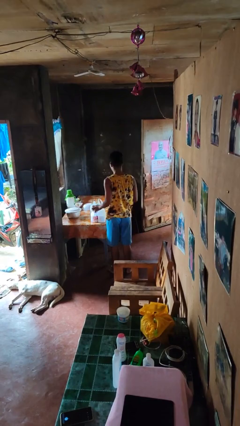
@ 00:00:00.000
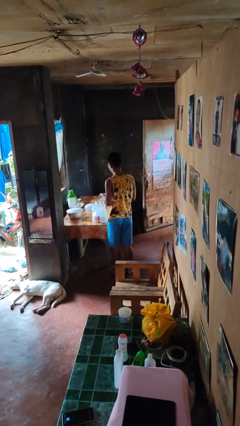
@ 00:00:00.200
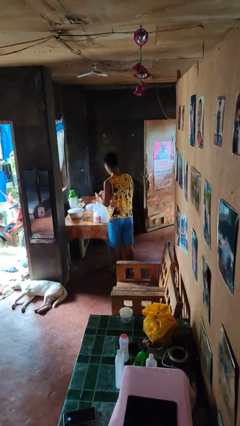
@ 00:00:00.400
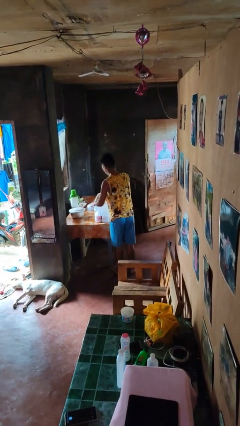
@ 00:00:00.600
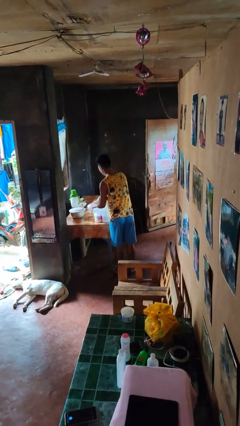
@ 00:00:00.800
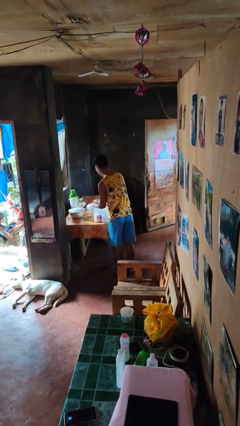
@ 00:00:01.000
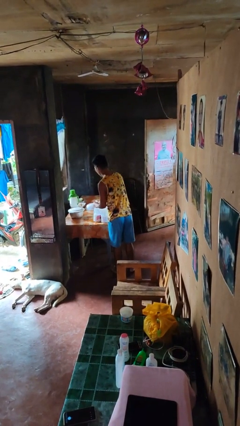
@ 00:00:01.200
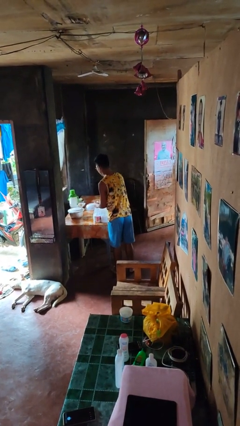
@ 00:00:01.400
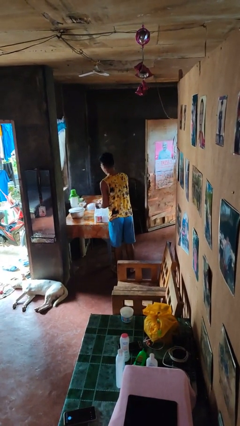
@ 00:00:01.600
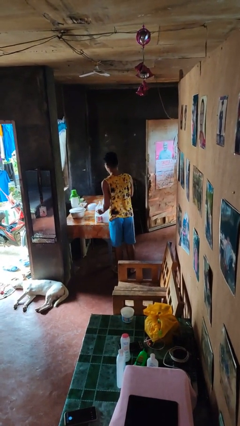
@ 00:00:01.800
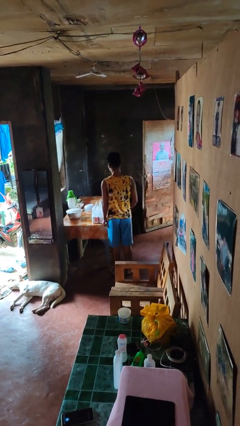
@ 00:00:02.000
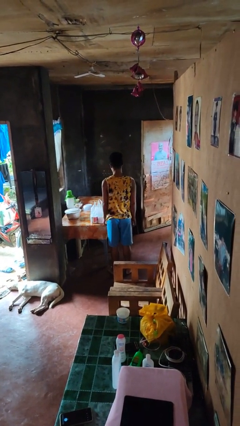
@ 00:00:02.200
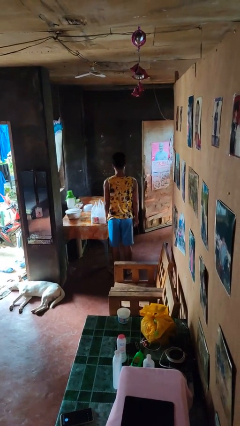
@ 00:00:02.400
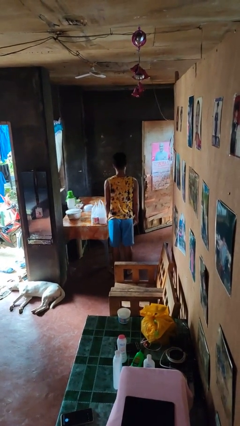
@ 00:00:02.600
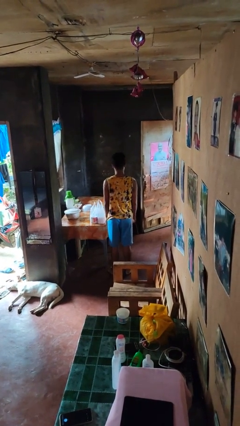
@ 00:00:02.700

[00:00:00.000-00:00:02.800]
person puts object into bag

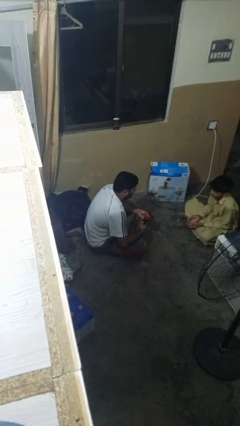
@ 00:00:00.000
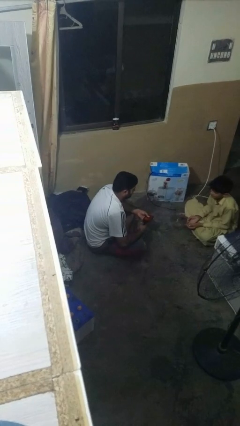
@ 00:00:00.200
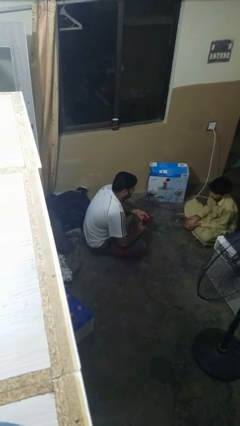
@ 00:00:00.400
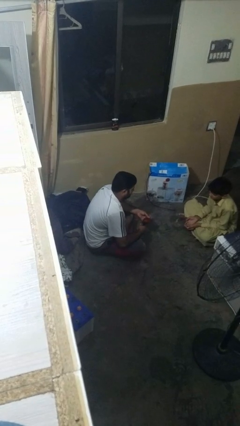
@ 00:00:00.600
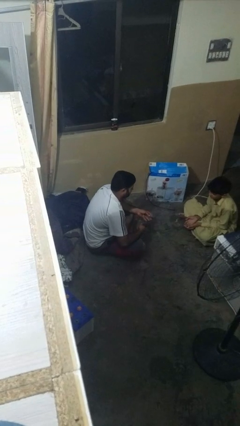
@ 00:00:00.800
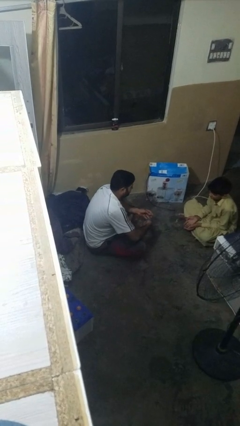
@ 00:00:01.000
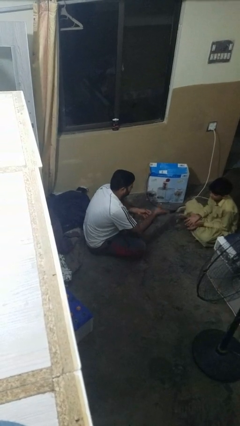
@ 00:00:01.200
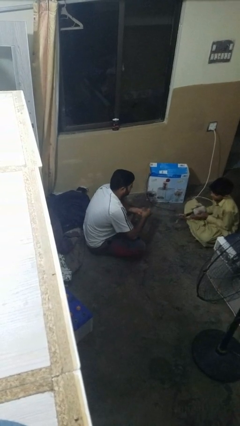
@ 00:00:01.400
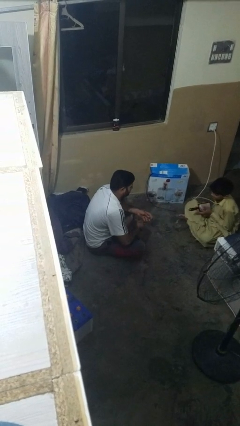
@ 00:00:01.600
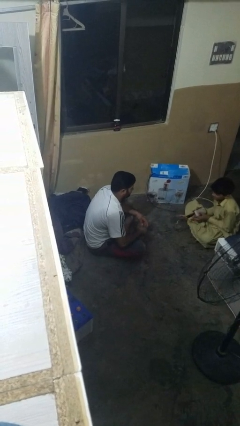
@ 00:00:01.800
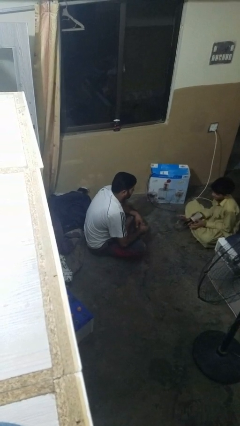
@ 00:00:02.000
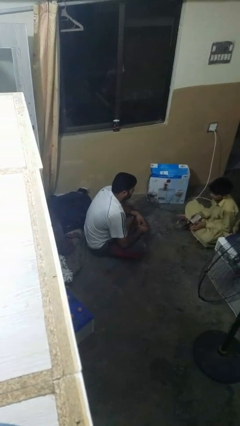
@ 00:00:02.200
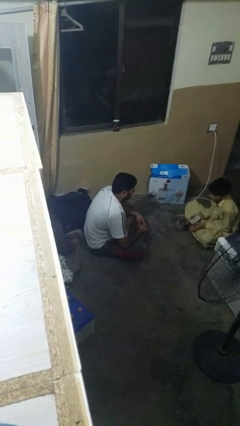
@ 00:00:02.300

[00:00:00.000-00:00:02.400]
person throws object to person

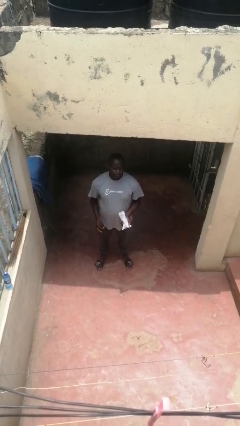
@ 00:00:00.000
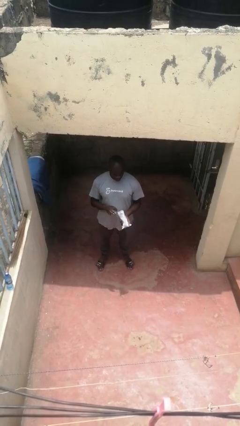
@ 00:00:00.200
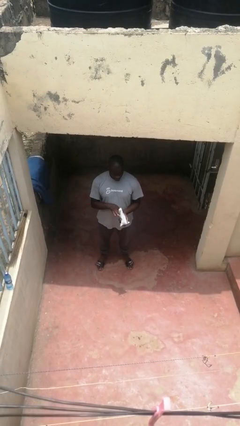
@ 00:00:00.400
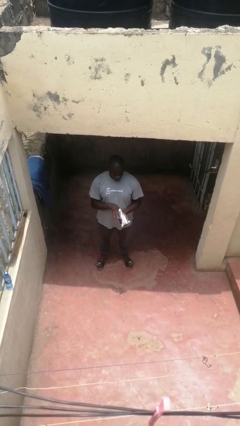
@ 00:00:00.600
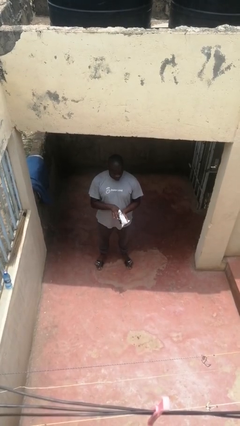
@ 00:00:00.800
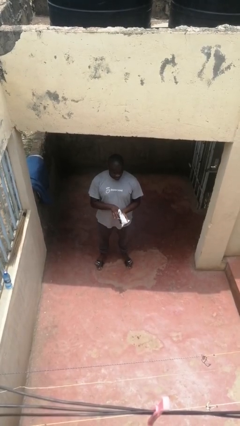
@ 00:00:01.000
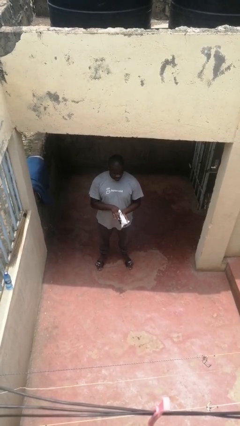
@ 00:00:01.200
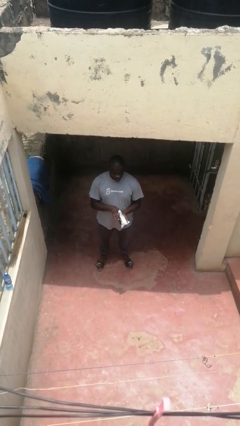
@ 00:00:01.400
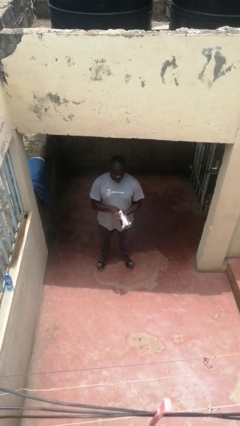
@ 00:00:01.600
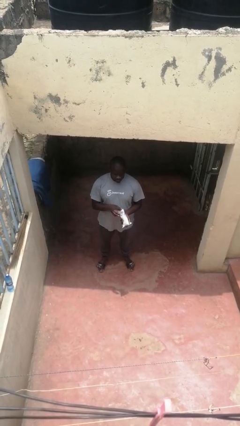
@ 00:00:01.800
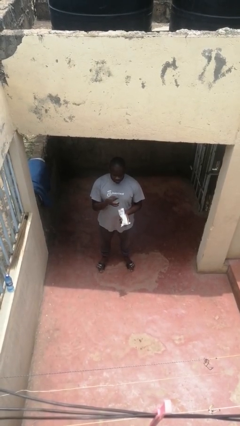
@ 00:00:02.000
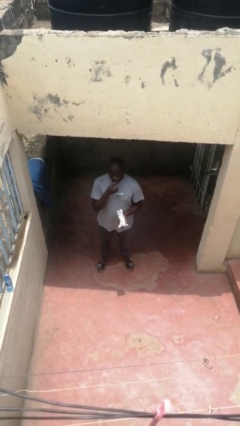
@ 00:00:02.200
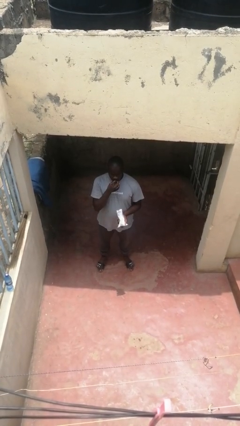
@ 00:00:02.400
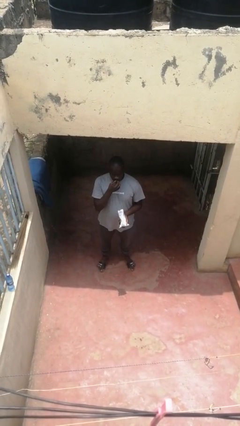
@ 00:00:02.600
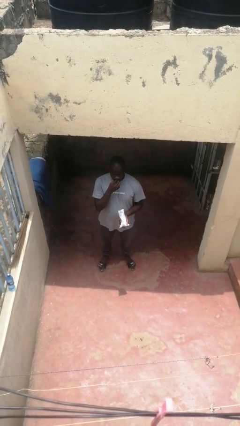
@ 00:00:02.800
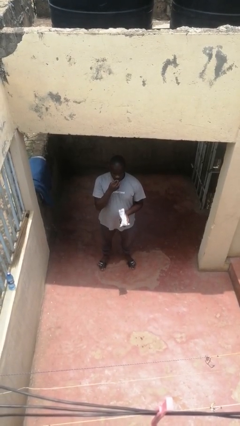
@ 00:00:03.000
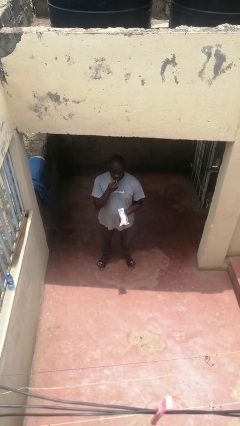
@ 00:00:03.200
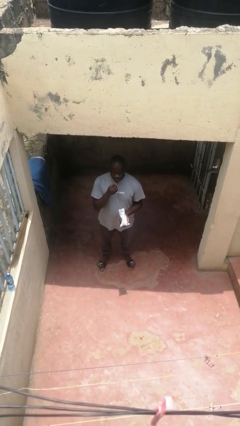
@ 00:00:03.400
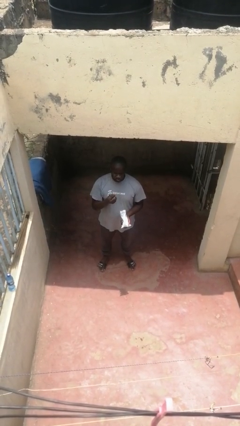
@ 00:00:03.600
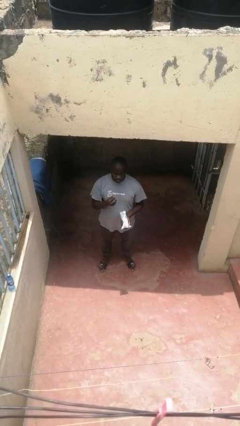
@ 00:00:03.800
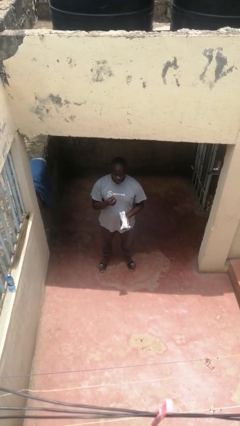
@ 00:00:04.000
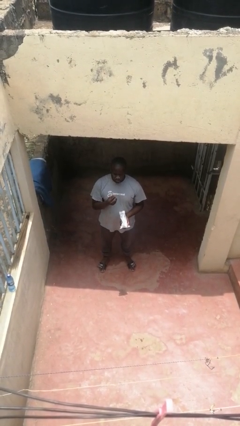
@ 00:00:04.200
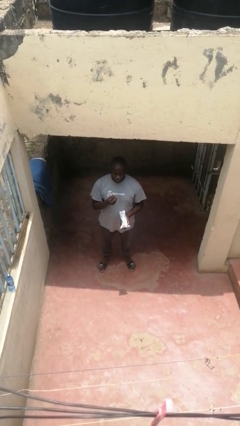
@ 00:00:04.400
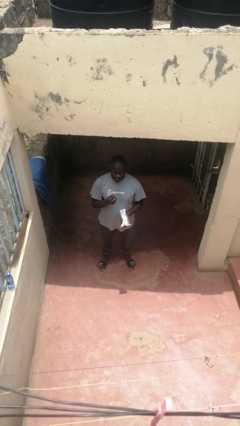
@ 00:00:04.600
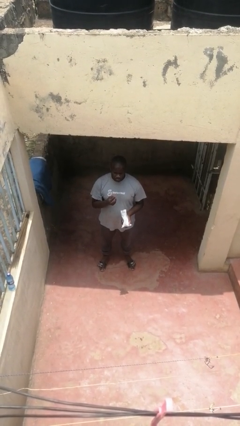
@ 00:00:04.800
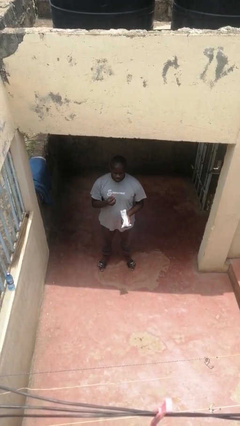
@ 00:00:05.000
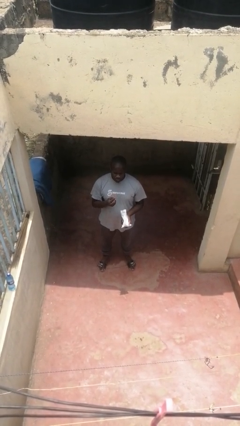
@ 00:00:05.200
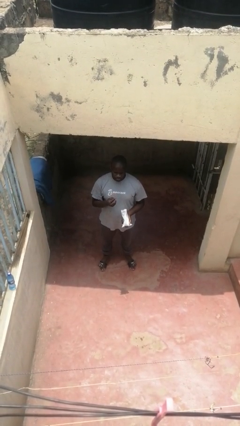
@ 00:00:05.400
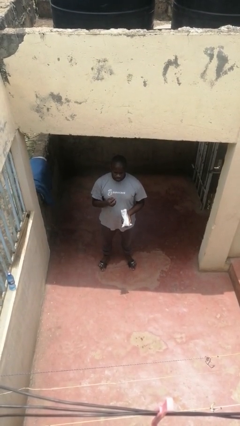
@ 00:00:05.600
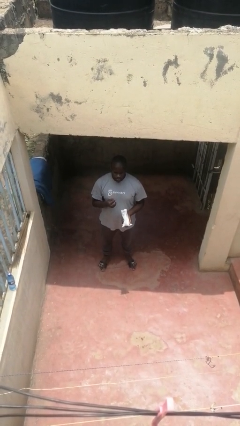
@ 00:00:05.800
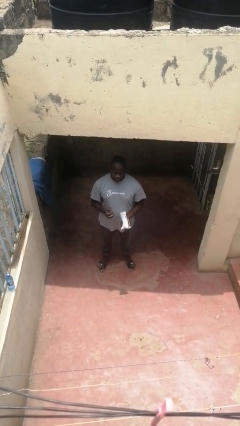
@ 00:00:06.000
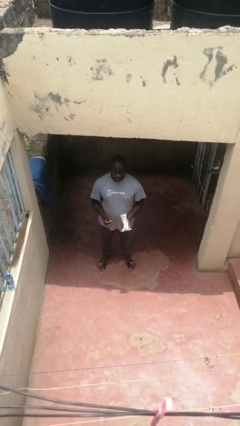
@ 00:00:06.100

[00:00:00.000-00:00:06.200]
person eats snack from bag

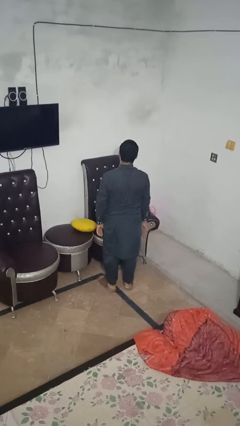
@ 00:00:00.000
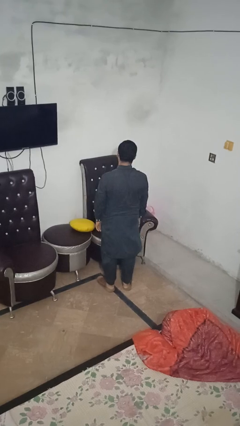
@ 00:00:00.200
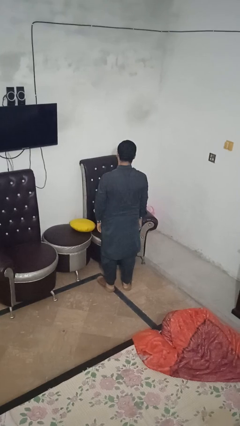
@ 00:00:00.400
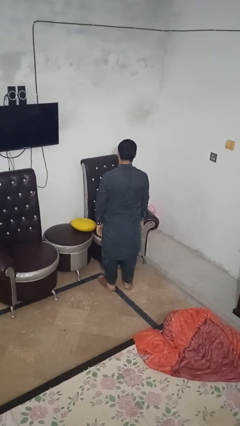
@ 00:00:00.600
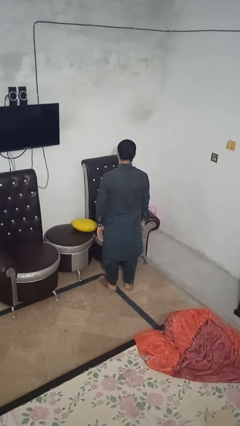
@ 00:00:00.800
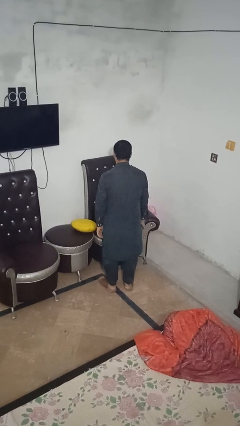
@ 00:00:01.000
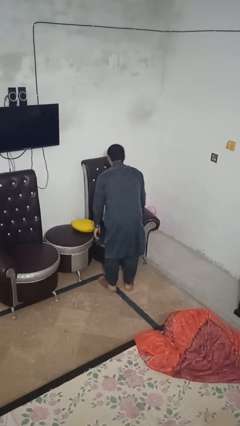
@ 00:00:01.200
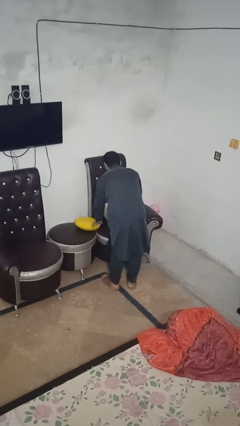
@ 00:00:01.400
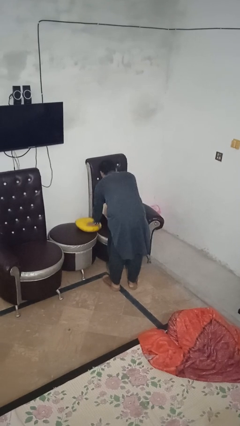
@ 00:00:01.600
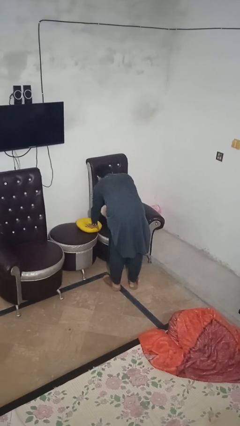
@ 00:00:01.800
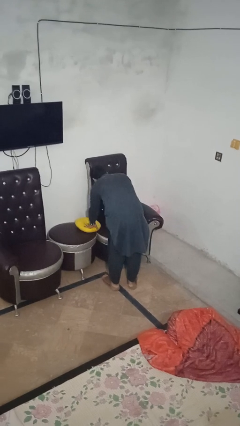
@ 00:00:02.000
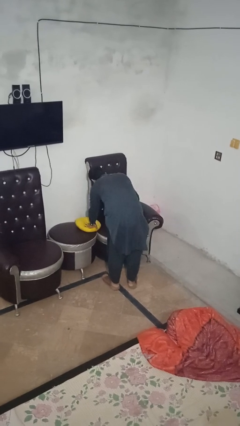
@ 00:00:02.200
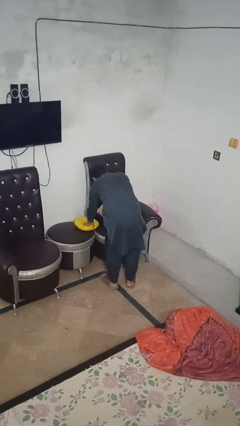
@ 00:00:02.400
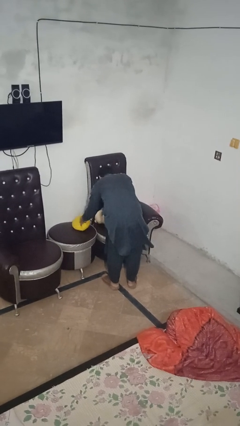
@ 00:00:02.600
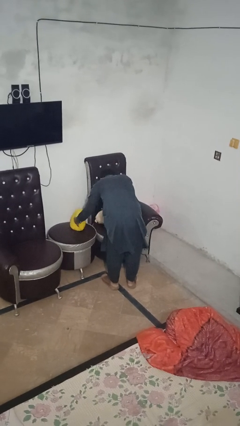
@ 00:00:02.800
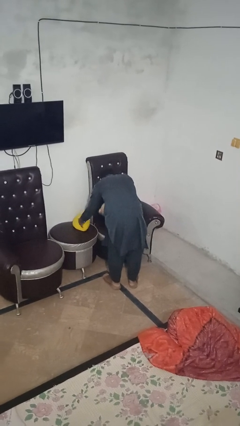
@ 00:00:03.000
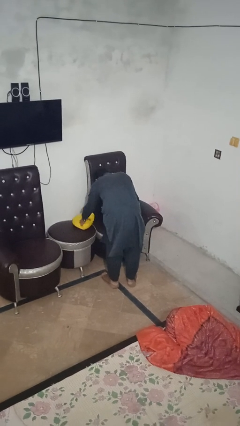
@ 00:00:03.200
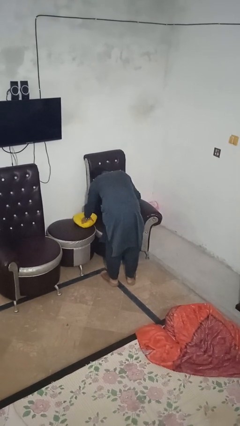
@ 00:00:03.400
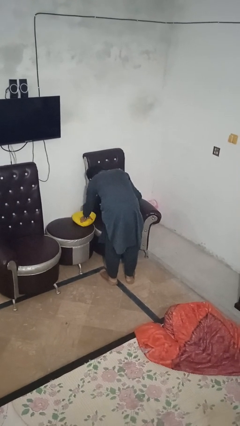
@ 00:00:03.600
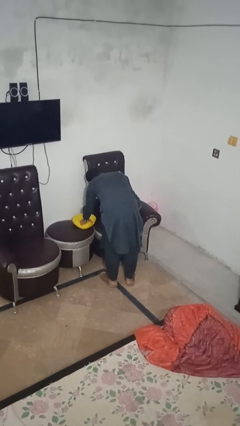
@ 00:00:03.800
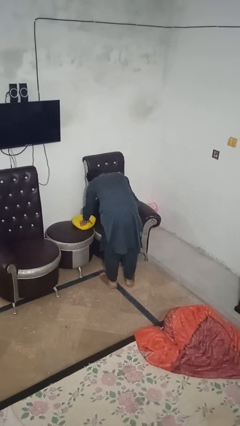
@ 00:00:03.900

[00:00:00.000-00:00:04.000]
person searches in couch

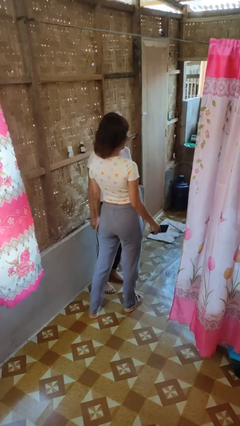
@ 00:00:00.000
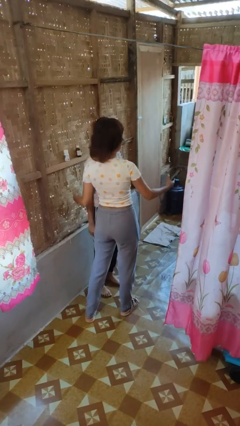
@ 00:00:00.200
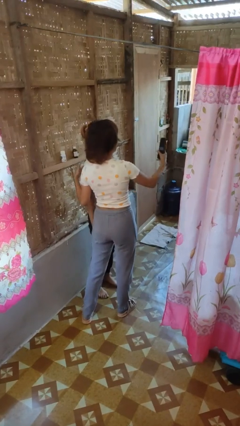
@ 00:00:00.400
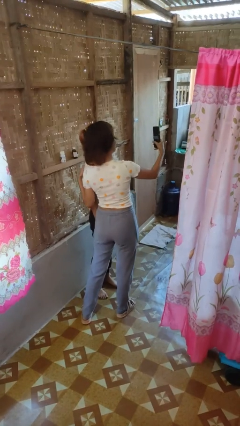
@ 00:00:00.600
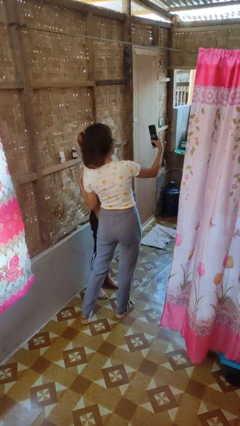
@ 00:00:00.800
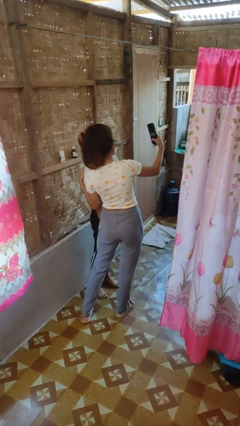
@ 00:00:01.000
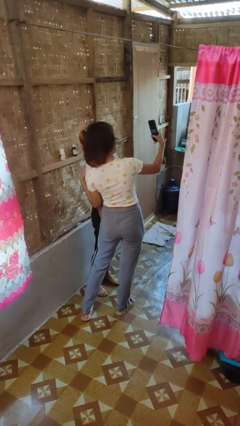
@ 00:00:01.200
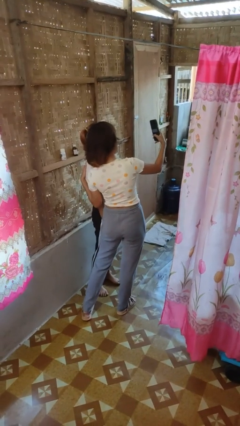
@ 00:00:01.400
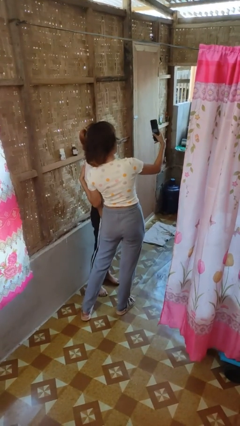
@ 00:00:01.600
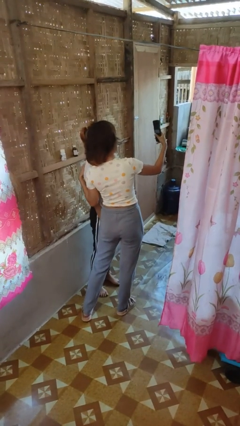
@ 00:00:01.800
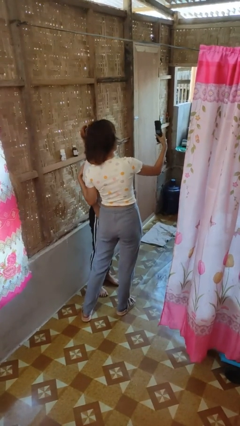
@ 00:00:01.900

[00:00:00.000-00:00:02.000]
person takes selfie with person

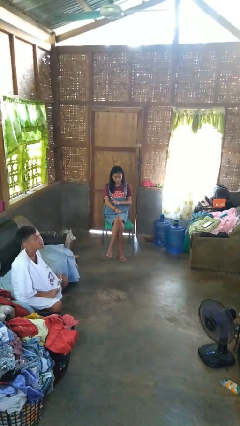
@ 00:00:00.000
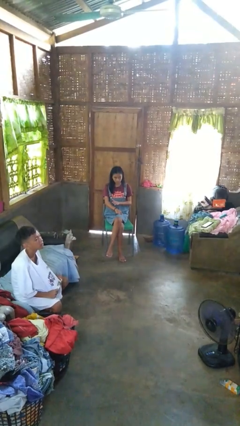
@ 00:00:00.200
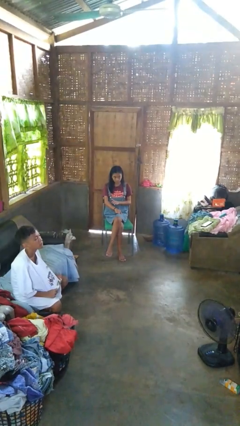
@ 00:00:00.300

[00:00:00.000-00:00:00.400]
person swats bug
